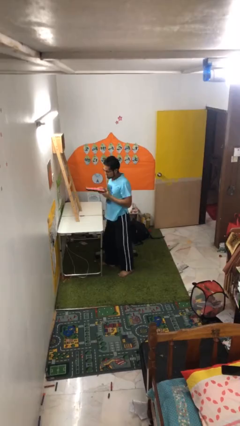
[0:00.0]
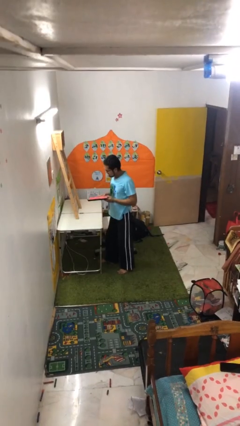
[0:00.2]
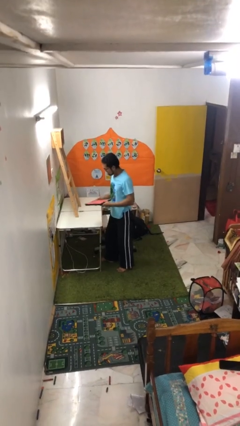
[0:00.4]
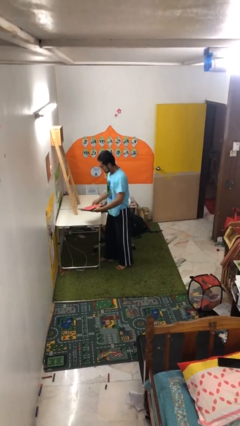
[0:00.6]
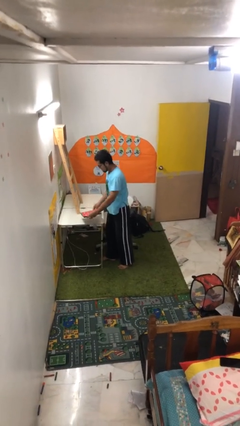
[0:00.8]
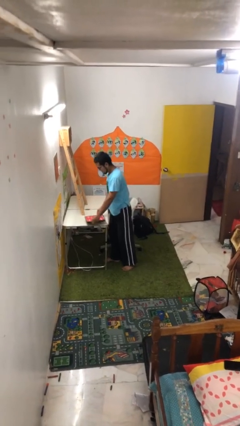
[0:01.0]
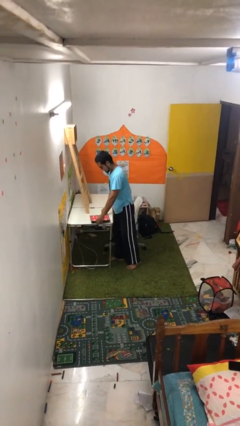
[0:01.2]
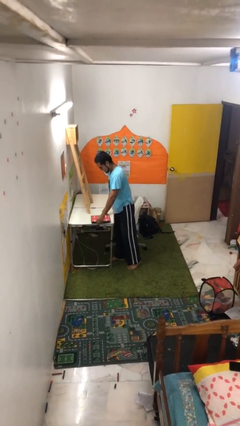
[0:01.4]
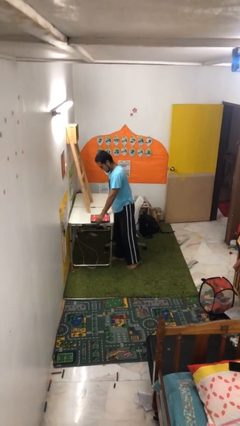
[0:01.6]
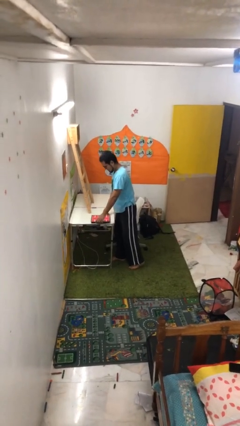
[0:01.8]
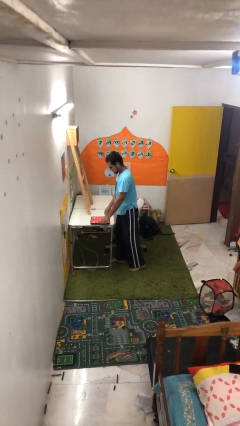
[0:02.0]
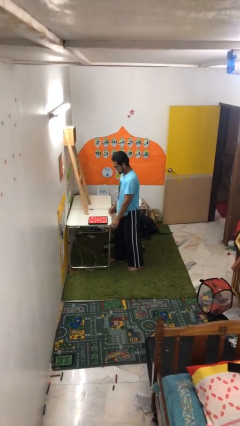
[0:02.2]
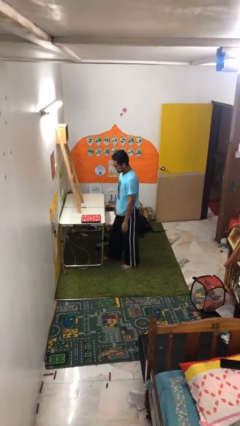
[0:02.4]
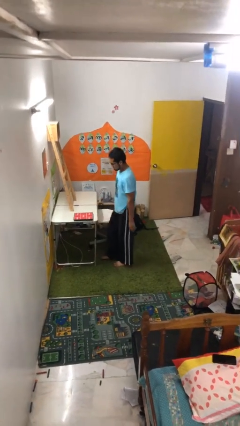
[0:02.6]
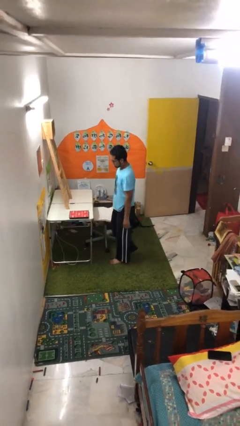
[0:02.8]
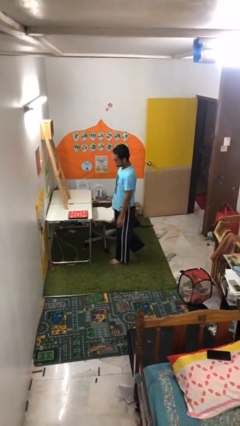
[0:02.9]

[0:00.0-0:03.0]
person puts down object on table

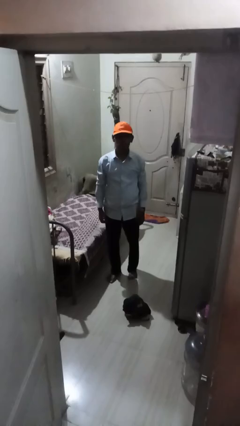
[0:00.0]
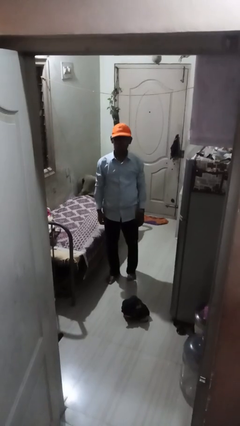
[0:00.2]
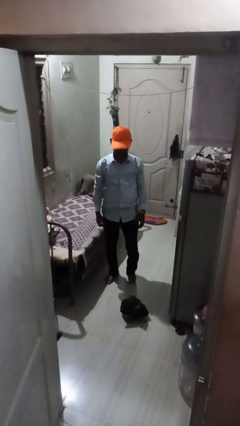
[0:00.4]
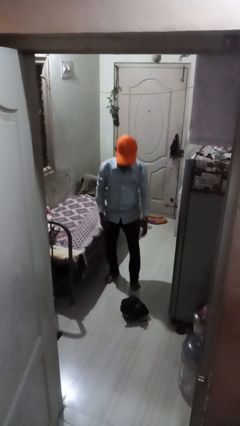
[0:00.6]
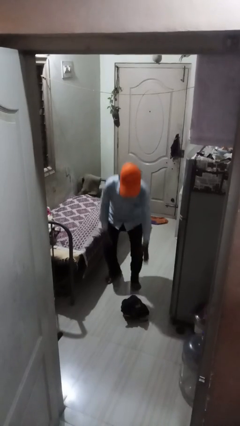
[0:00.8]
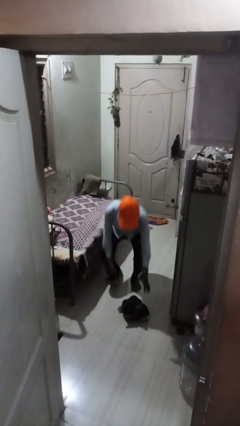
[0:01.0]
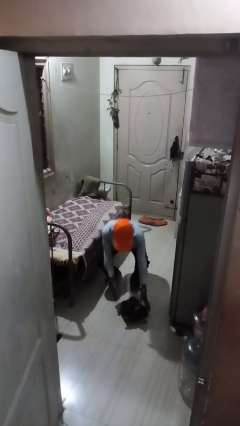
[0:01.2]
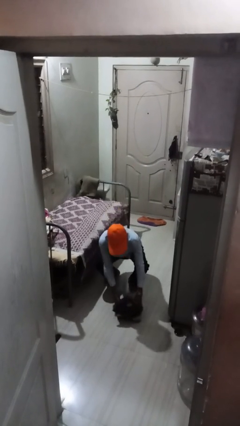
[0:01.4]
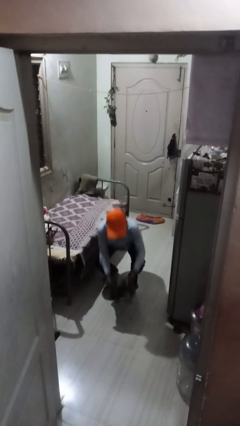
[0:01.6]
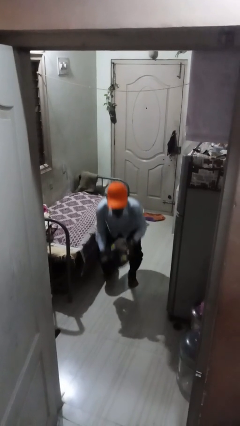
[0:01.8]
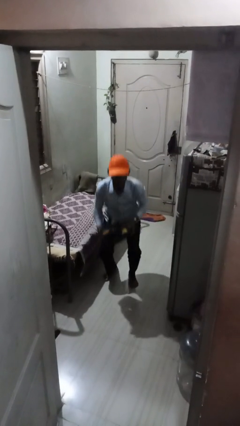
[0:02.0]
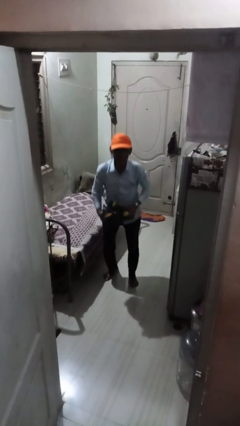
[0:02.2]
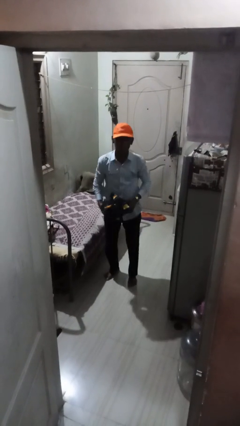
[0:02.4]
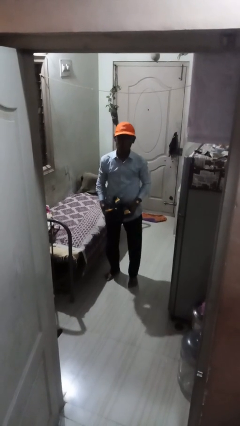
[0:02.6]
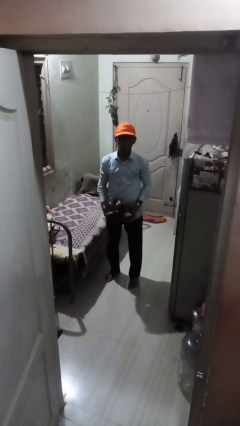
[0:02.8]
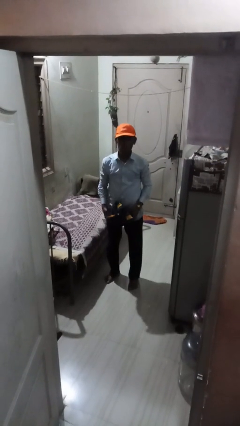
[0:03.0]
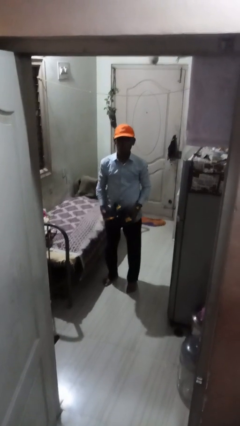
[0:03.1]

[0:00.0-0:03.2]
person picks up object from floor

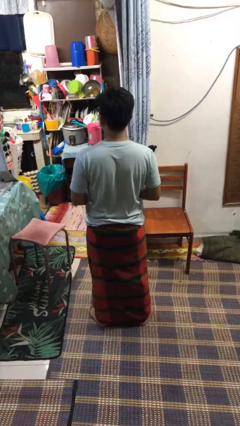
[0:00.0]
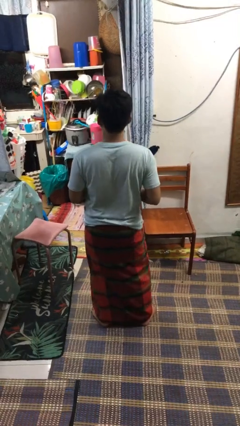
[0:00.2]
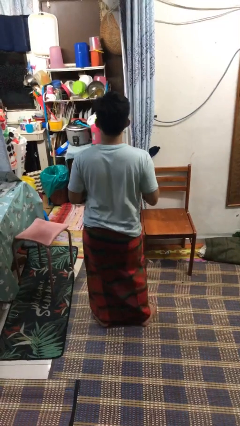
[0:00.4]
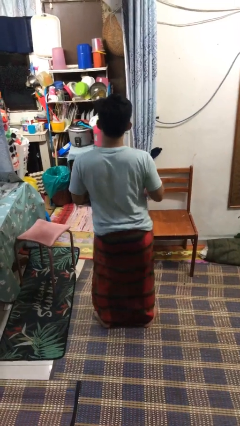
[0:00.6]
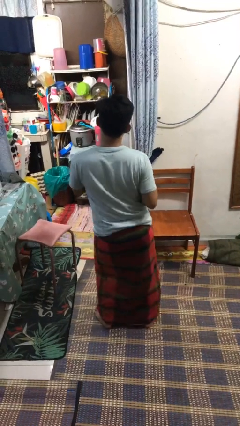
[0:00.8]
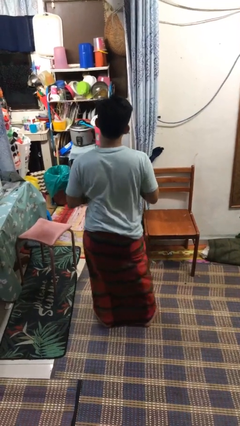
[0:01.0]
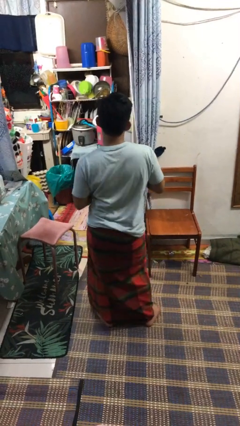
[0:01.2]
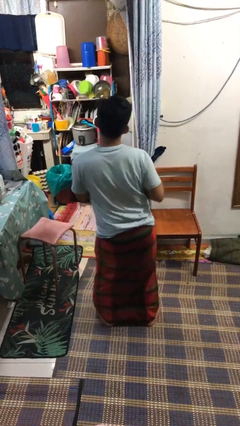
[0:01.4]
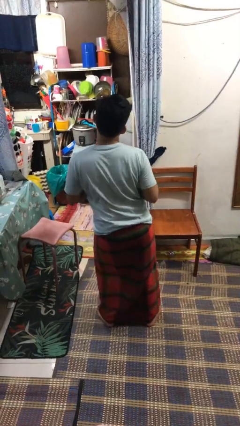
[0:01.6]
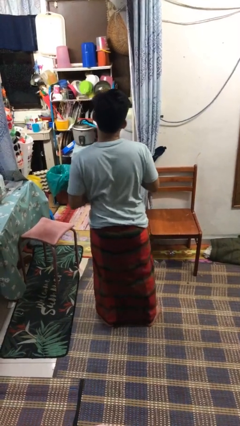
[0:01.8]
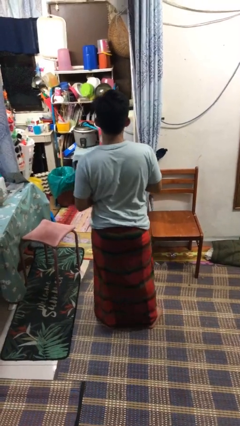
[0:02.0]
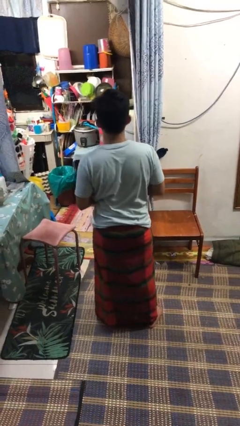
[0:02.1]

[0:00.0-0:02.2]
person wiggles hips

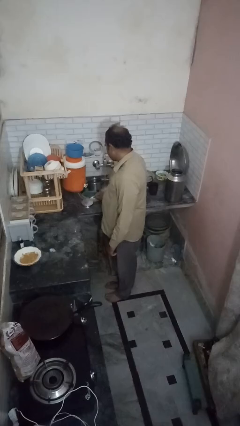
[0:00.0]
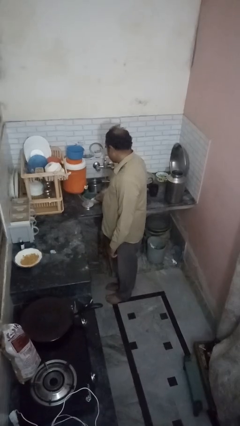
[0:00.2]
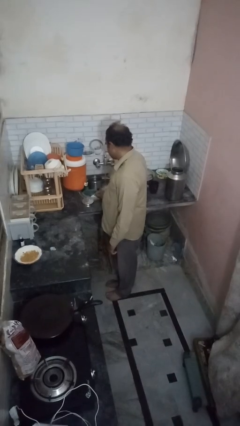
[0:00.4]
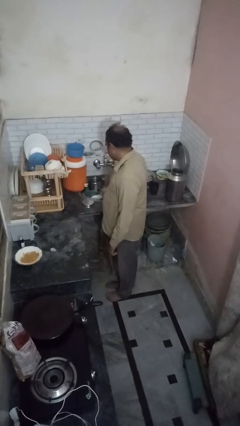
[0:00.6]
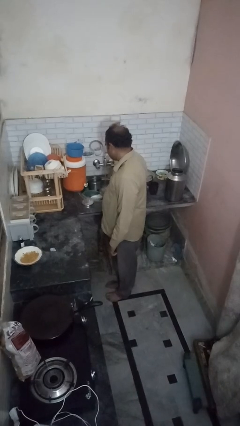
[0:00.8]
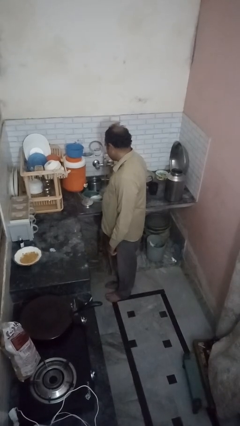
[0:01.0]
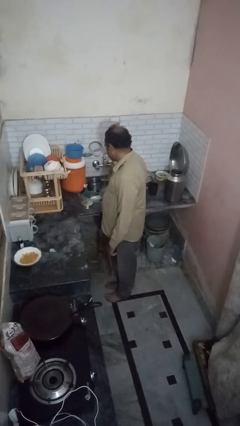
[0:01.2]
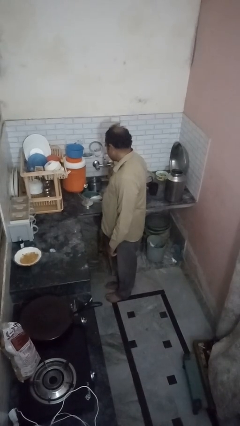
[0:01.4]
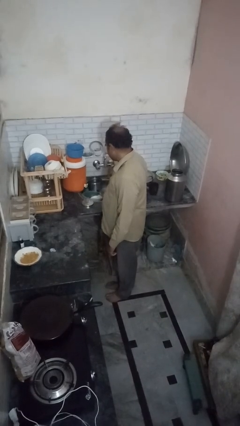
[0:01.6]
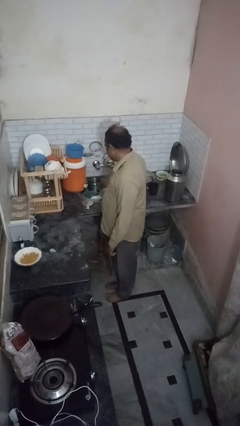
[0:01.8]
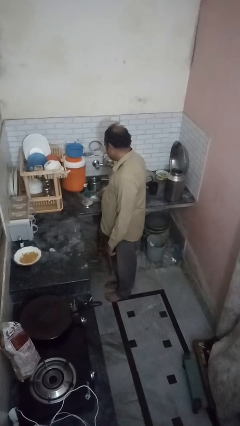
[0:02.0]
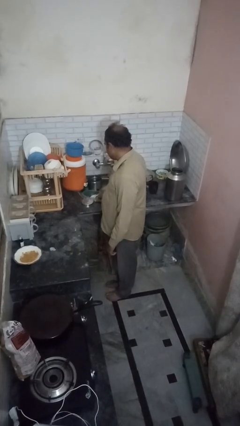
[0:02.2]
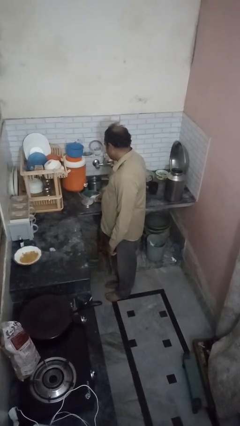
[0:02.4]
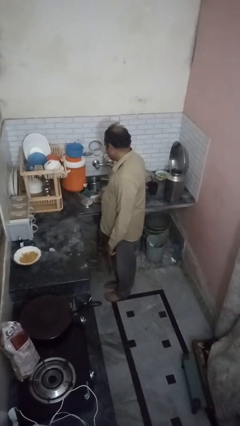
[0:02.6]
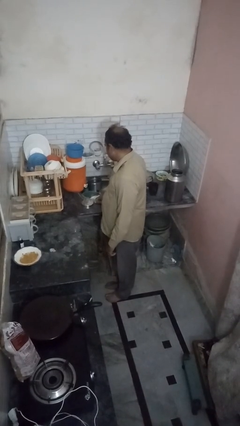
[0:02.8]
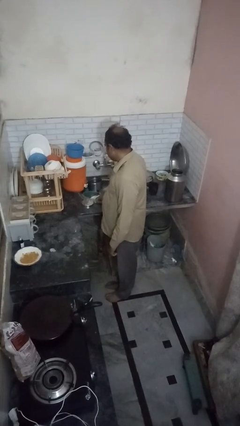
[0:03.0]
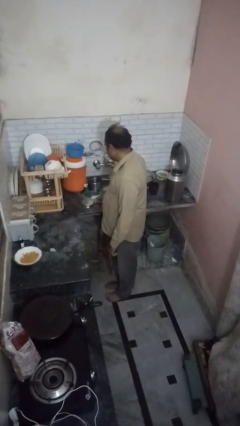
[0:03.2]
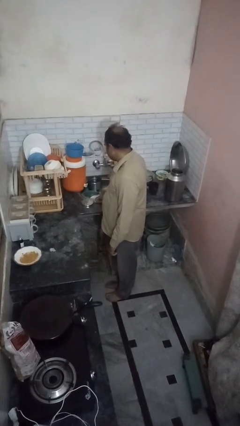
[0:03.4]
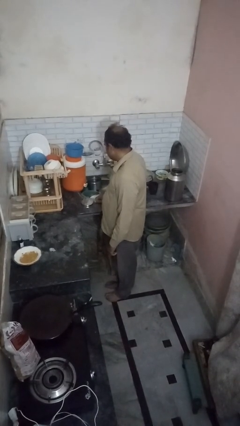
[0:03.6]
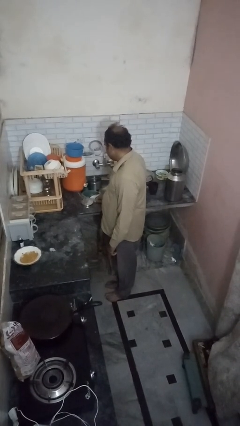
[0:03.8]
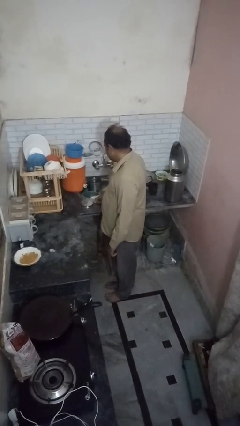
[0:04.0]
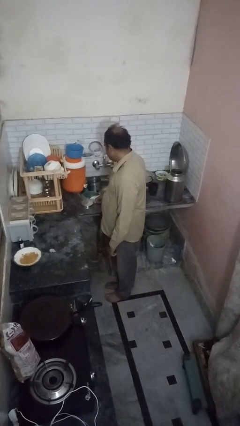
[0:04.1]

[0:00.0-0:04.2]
person closes dishwasher

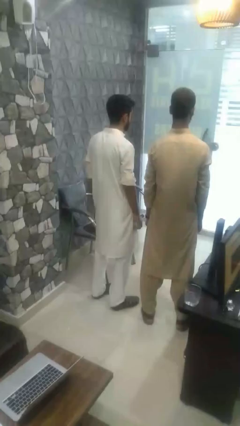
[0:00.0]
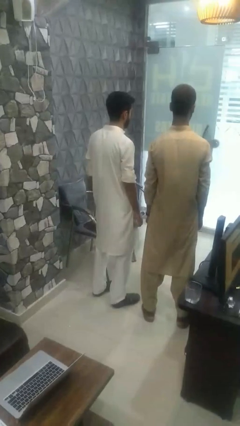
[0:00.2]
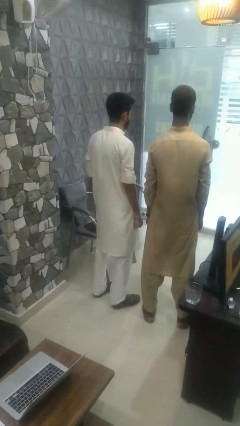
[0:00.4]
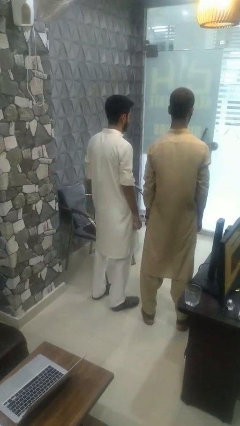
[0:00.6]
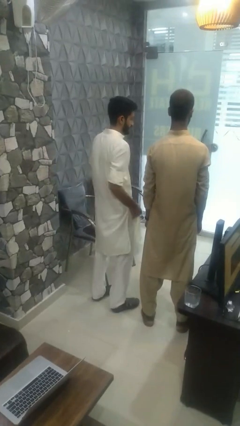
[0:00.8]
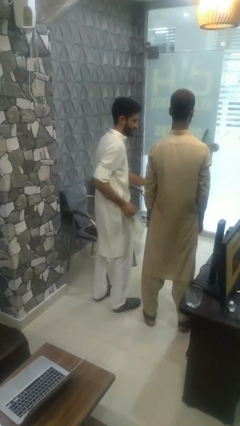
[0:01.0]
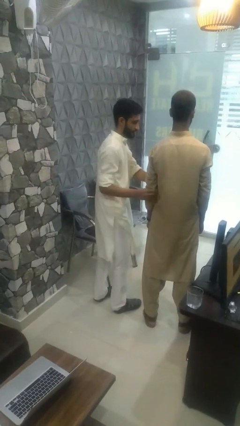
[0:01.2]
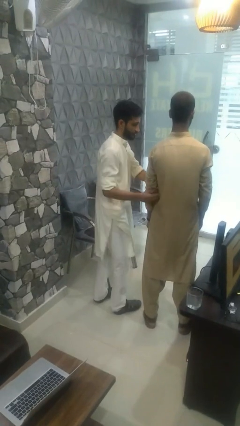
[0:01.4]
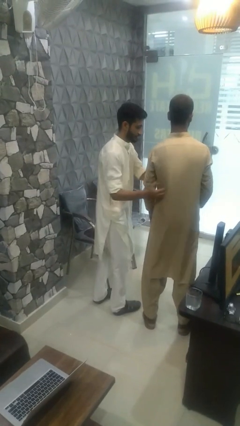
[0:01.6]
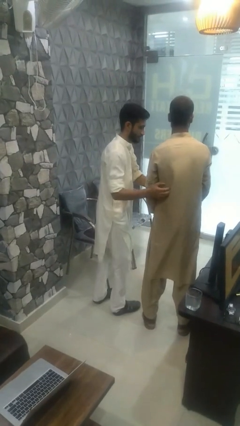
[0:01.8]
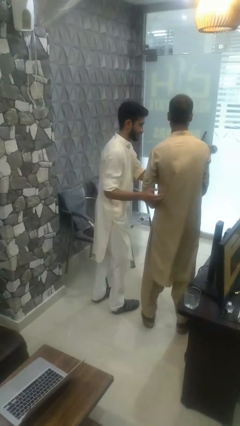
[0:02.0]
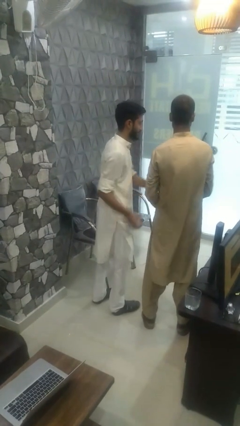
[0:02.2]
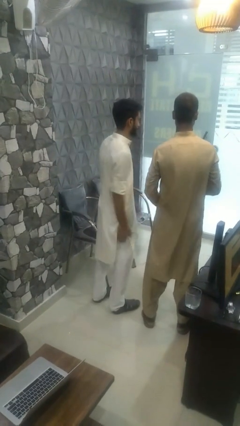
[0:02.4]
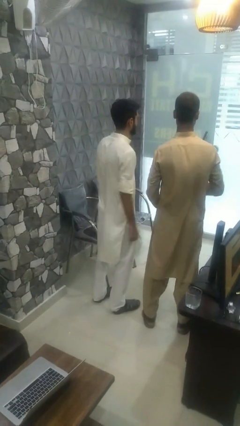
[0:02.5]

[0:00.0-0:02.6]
person tickles person

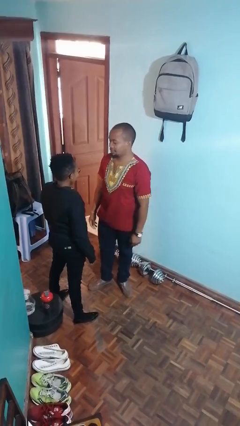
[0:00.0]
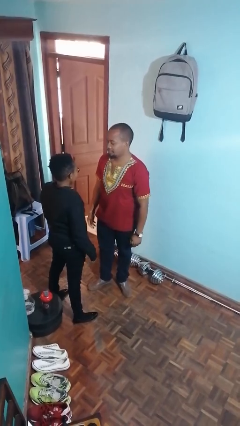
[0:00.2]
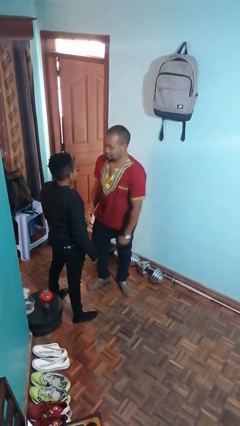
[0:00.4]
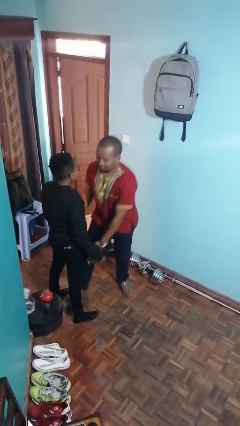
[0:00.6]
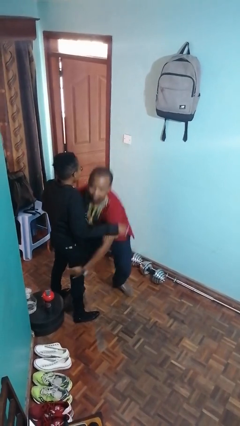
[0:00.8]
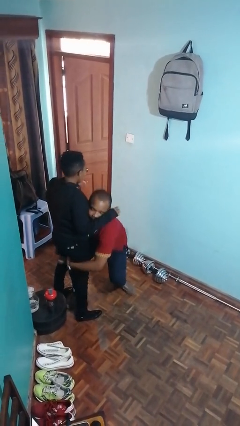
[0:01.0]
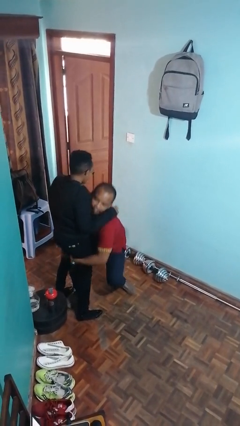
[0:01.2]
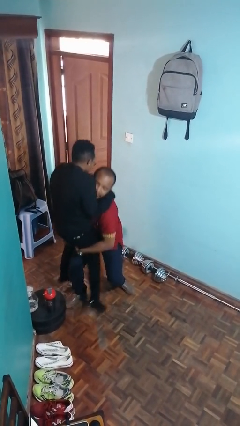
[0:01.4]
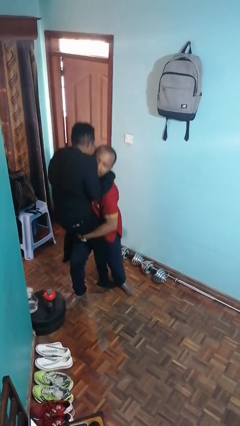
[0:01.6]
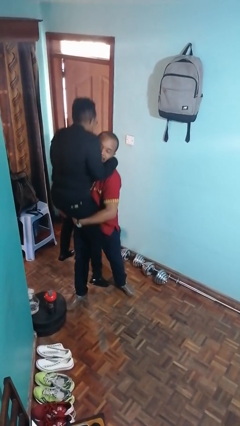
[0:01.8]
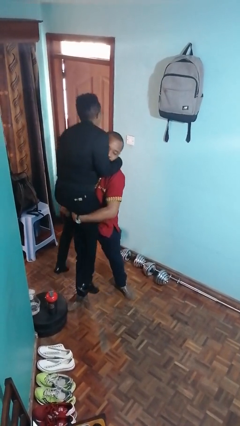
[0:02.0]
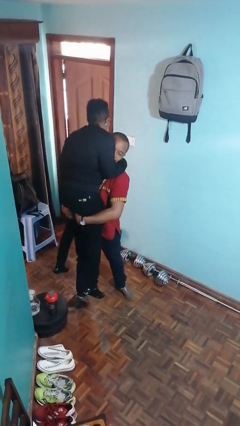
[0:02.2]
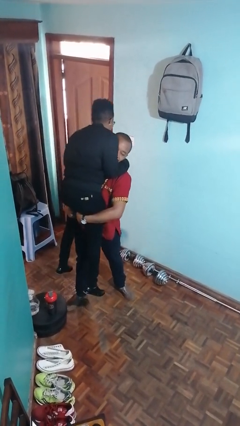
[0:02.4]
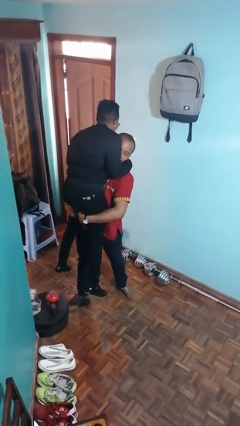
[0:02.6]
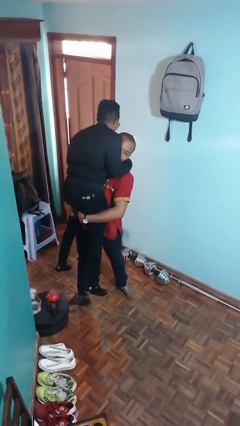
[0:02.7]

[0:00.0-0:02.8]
person picks up person
